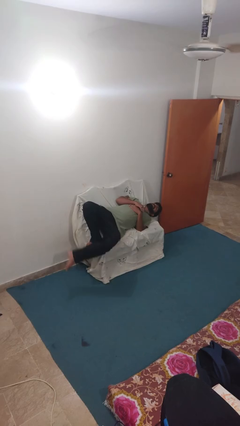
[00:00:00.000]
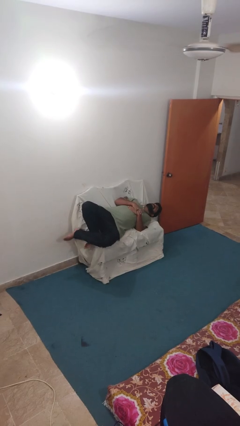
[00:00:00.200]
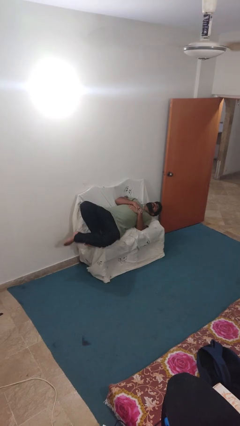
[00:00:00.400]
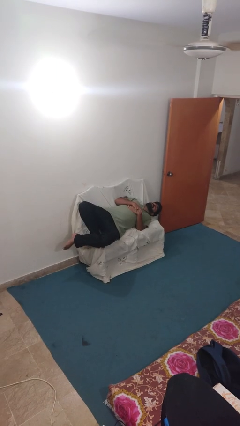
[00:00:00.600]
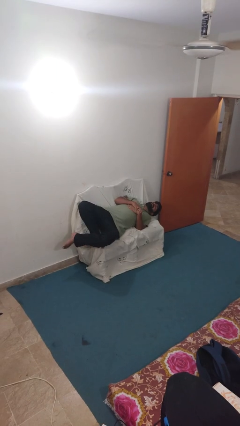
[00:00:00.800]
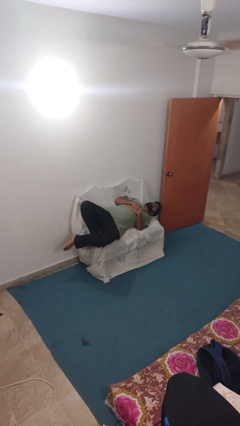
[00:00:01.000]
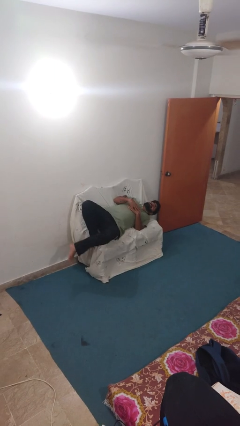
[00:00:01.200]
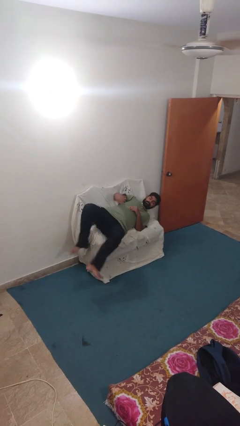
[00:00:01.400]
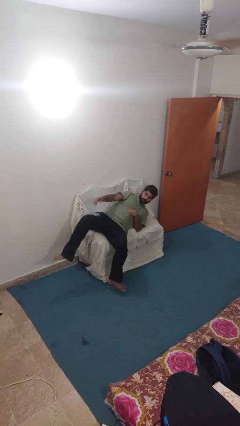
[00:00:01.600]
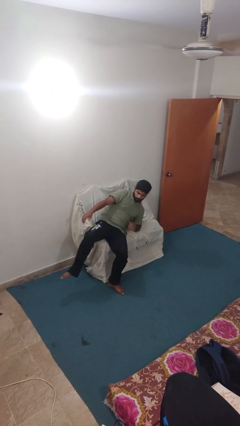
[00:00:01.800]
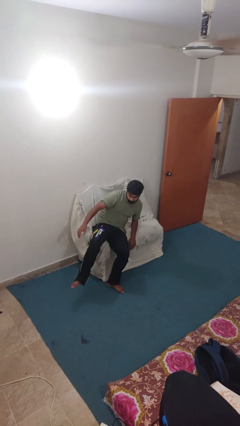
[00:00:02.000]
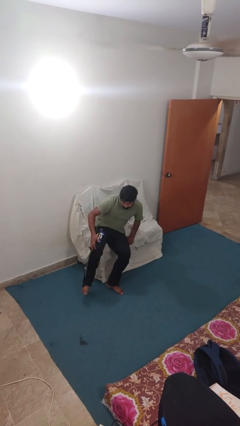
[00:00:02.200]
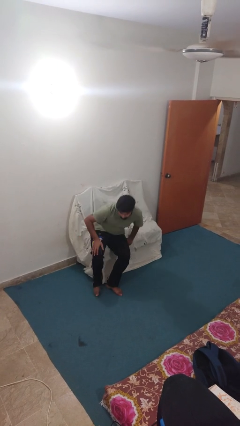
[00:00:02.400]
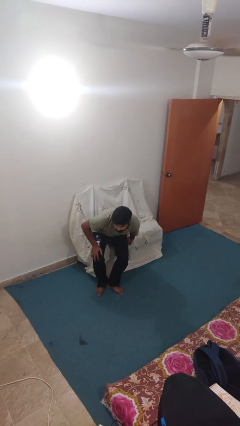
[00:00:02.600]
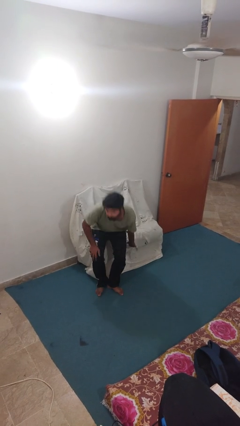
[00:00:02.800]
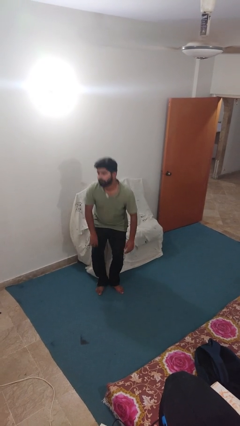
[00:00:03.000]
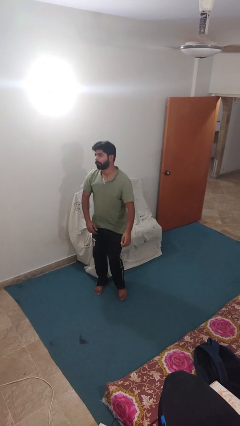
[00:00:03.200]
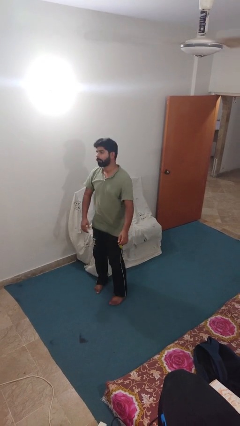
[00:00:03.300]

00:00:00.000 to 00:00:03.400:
person stands up

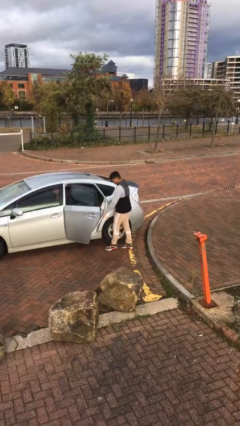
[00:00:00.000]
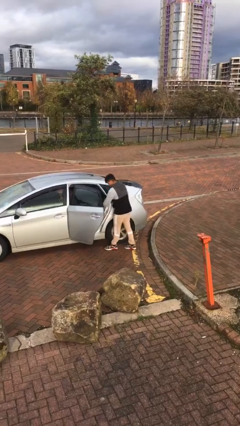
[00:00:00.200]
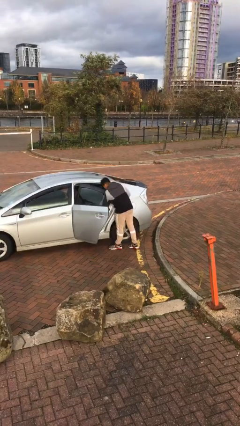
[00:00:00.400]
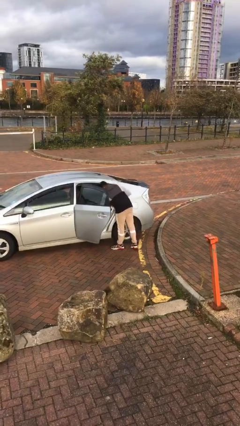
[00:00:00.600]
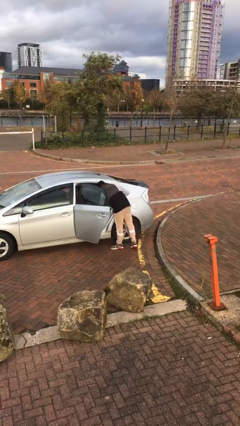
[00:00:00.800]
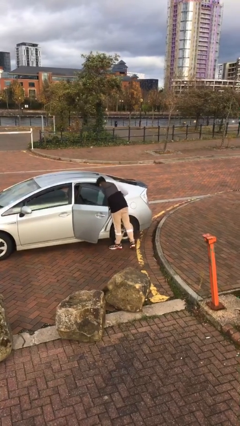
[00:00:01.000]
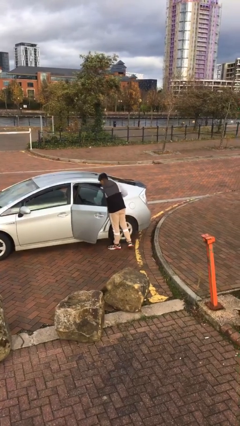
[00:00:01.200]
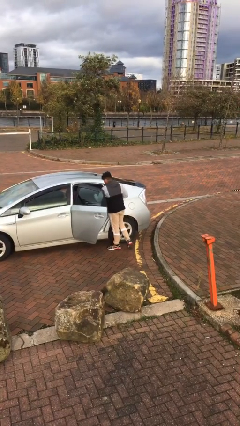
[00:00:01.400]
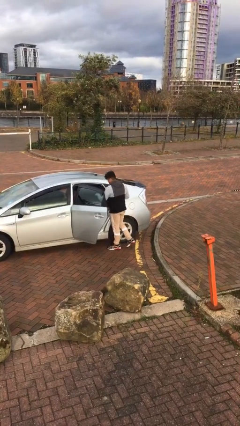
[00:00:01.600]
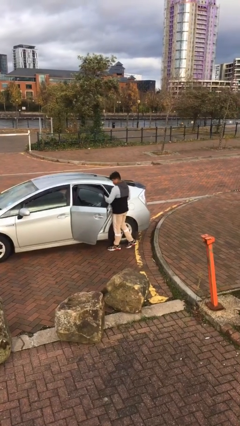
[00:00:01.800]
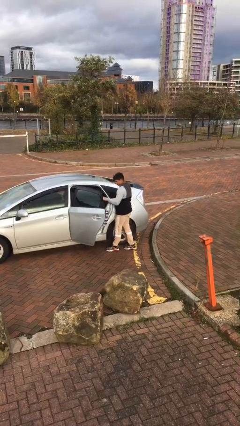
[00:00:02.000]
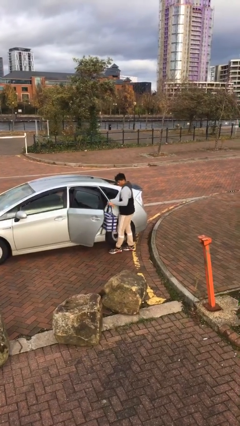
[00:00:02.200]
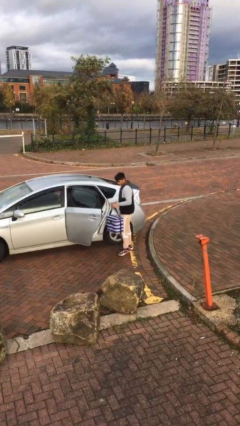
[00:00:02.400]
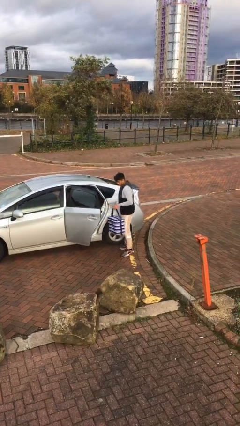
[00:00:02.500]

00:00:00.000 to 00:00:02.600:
person unloads car

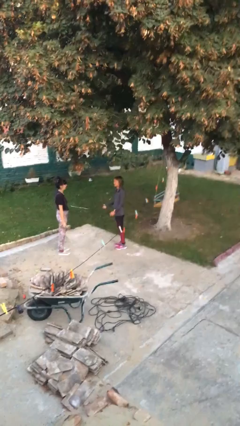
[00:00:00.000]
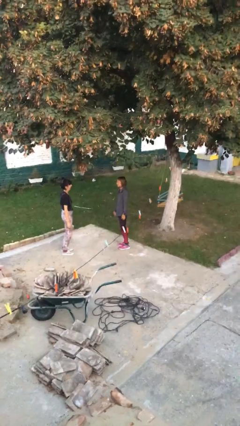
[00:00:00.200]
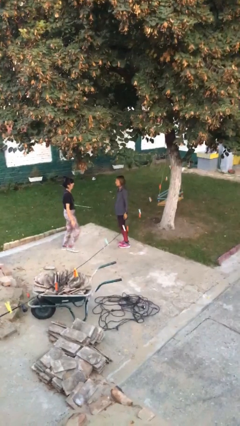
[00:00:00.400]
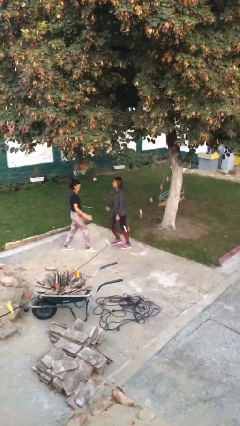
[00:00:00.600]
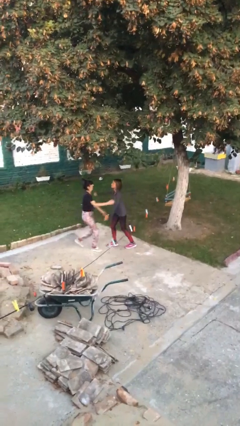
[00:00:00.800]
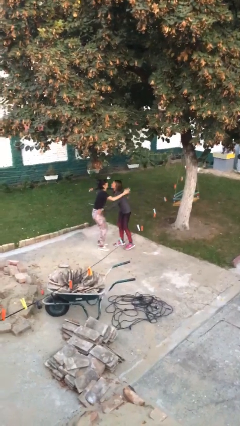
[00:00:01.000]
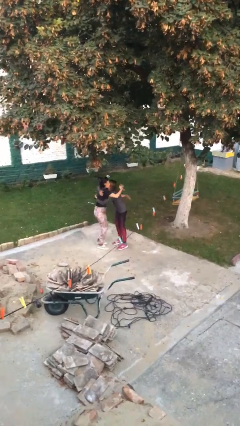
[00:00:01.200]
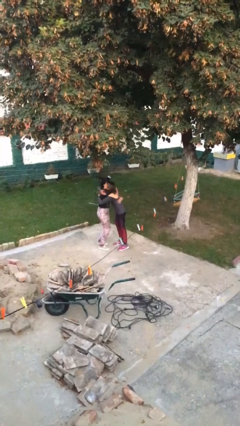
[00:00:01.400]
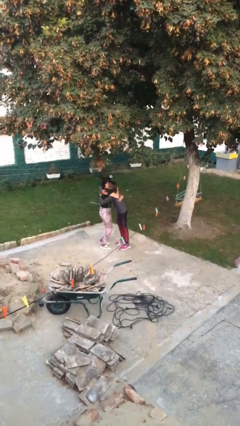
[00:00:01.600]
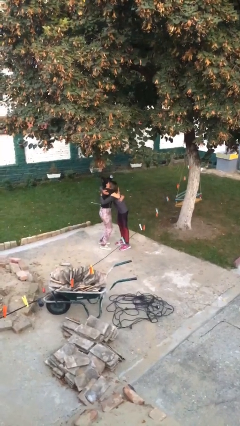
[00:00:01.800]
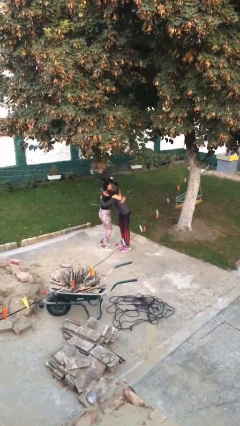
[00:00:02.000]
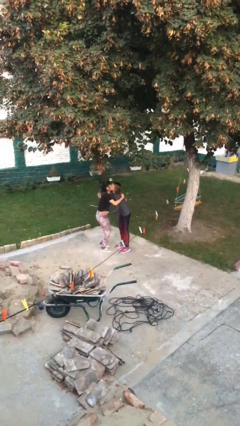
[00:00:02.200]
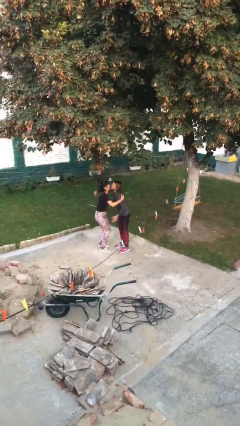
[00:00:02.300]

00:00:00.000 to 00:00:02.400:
person embraces person

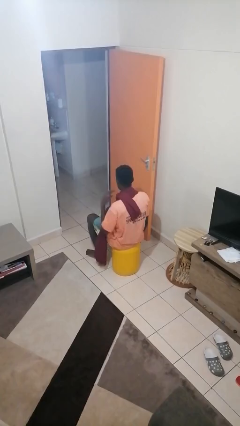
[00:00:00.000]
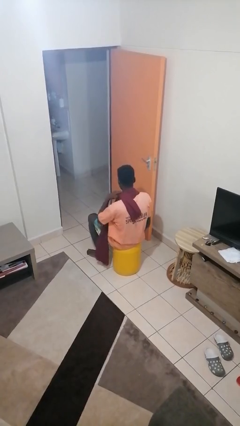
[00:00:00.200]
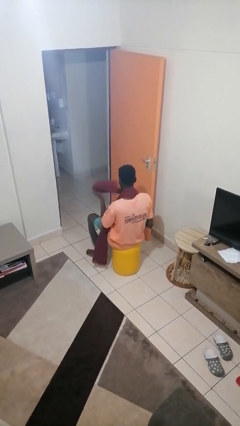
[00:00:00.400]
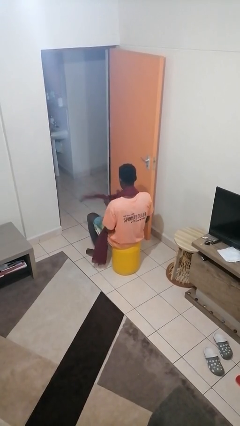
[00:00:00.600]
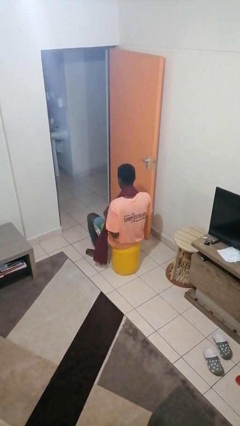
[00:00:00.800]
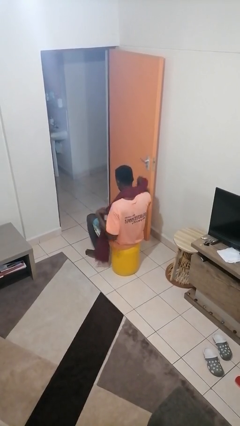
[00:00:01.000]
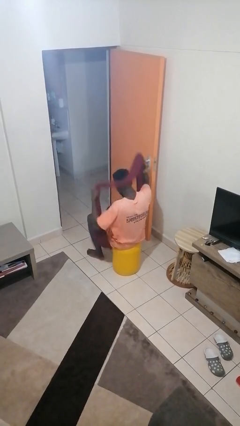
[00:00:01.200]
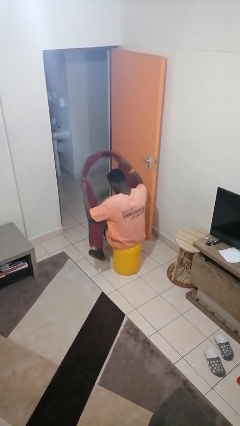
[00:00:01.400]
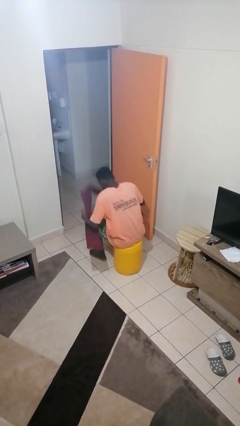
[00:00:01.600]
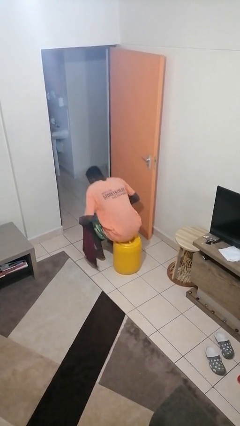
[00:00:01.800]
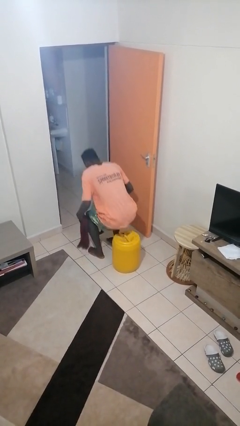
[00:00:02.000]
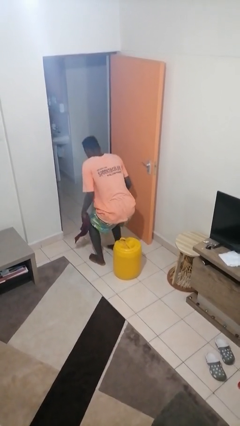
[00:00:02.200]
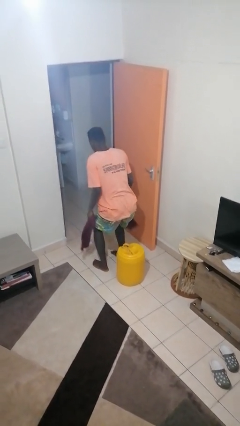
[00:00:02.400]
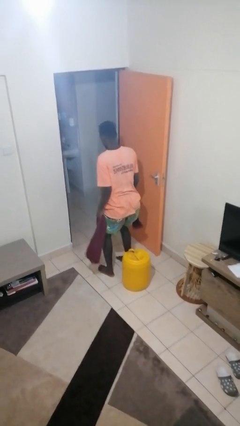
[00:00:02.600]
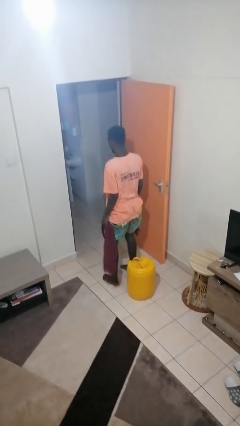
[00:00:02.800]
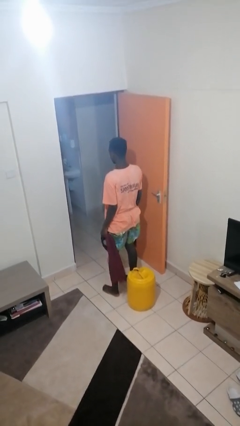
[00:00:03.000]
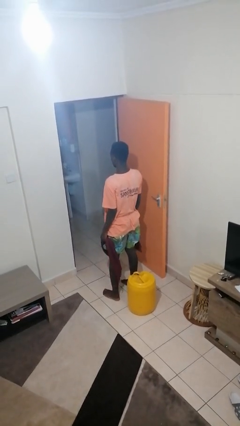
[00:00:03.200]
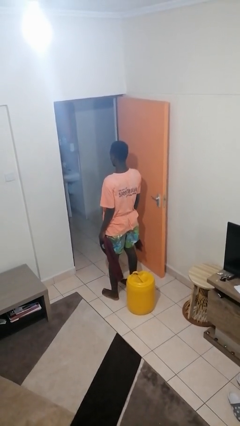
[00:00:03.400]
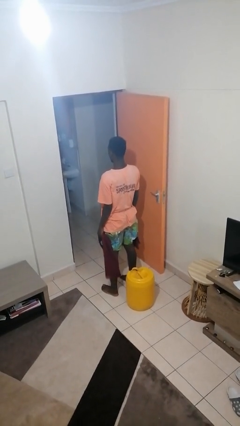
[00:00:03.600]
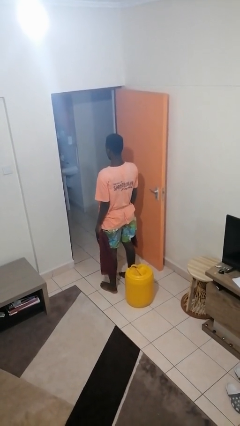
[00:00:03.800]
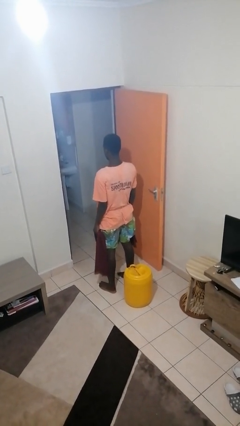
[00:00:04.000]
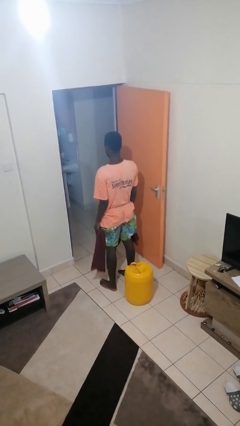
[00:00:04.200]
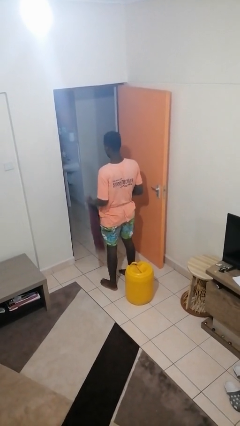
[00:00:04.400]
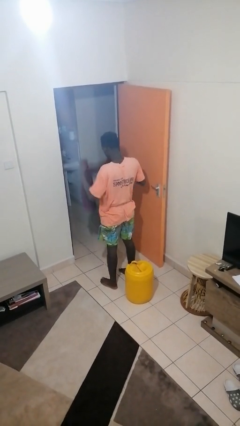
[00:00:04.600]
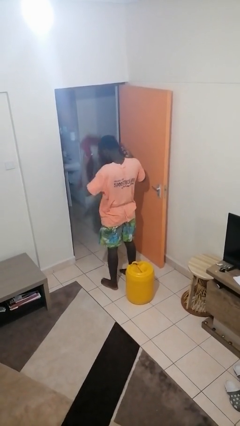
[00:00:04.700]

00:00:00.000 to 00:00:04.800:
person takes off scarf

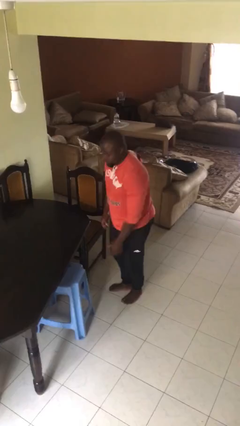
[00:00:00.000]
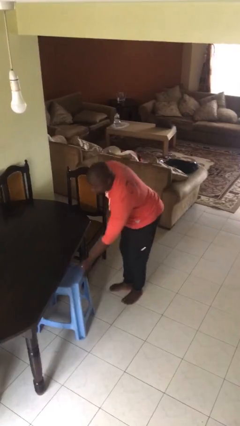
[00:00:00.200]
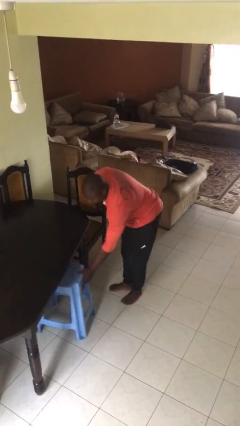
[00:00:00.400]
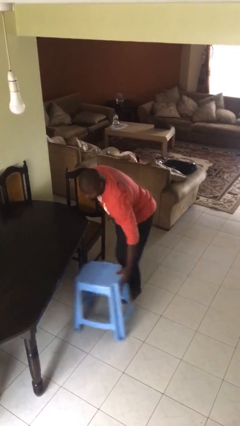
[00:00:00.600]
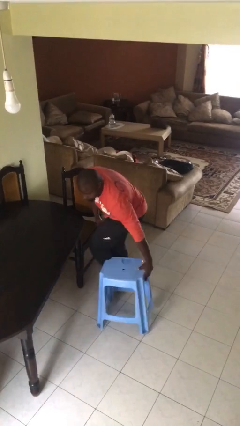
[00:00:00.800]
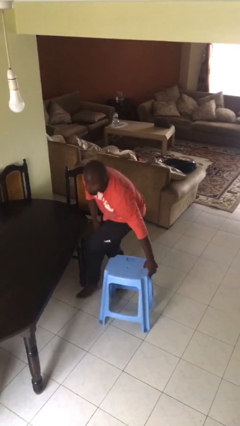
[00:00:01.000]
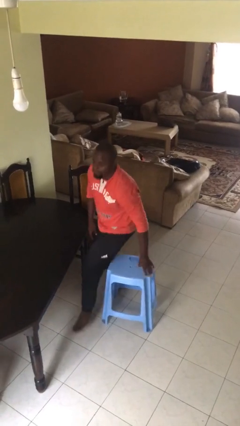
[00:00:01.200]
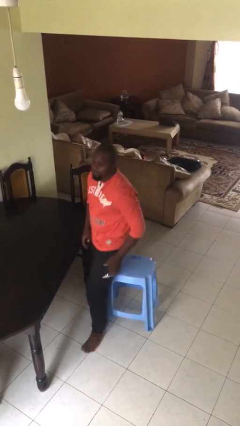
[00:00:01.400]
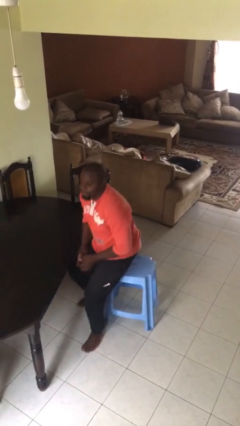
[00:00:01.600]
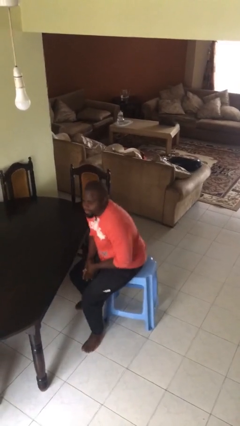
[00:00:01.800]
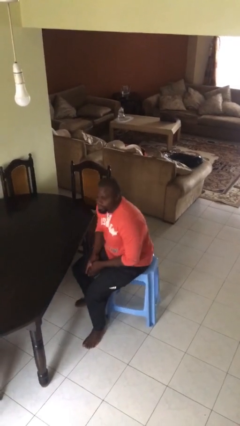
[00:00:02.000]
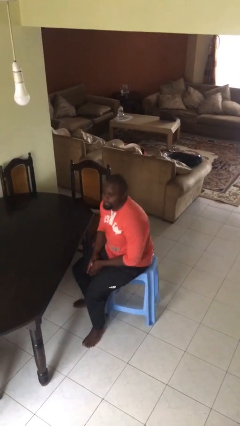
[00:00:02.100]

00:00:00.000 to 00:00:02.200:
person sits down

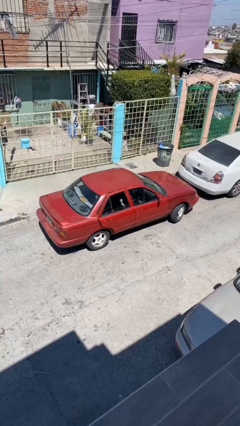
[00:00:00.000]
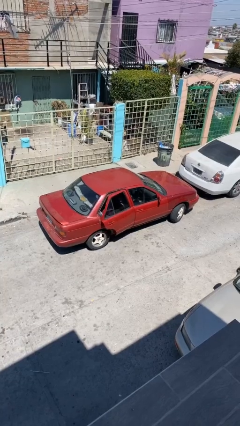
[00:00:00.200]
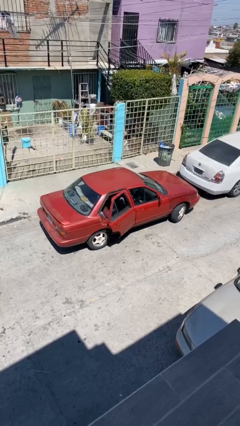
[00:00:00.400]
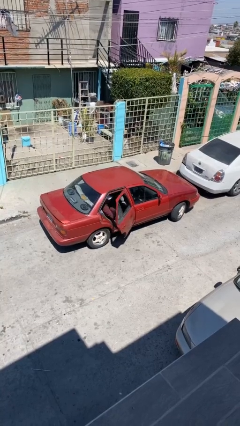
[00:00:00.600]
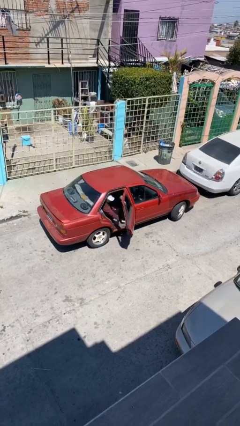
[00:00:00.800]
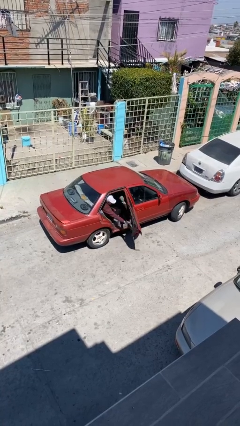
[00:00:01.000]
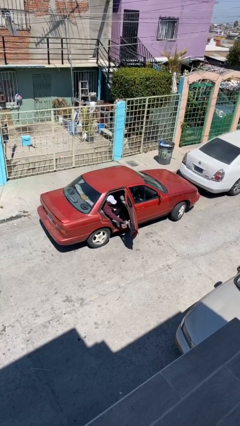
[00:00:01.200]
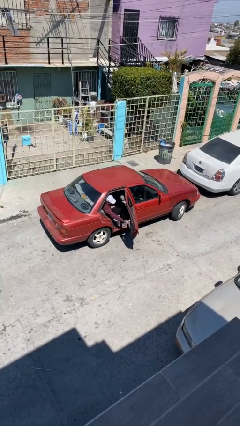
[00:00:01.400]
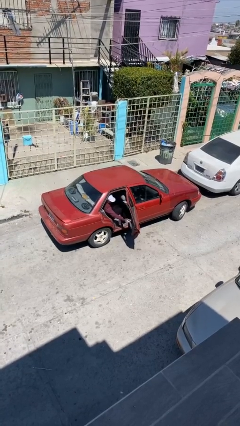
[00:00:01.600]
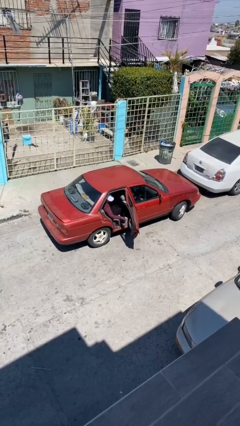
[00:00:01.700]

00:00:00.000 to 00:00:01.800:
person opens car door
